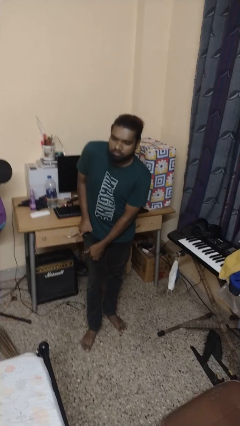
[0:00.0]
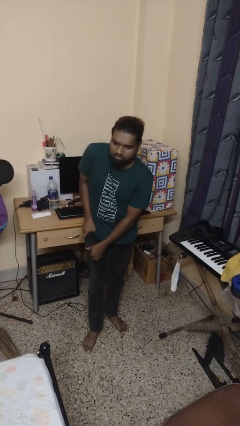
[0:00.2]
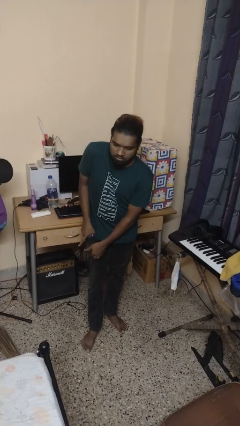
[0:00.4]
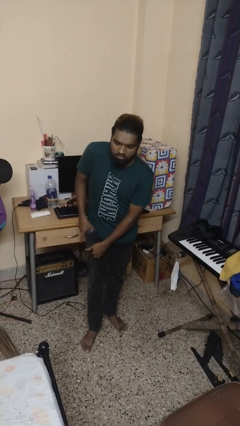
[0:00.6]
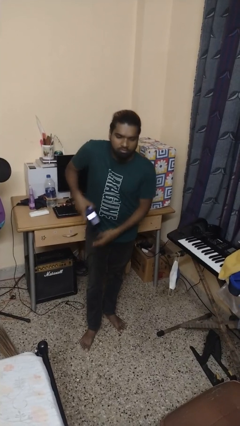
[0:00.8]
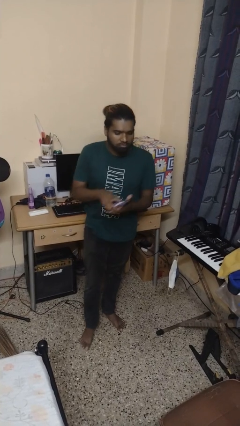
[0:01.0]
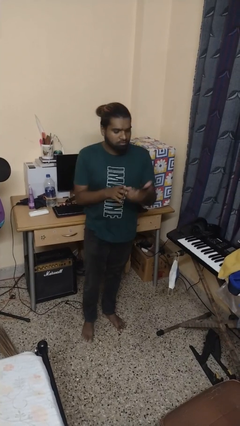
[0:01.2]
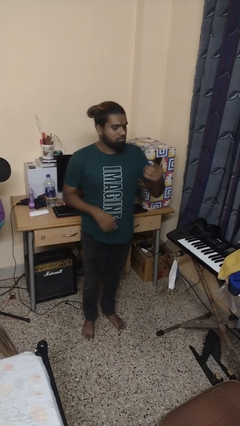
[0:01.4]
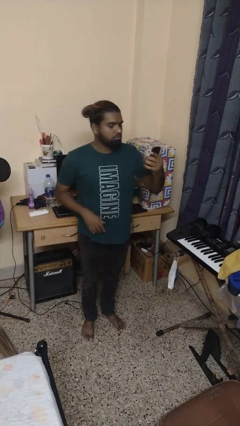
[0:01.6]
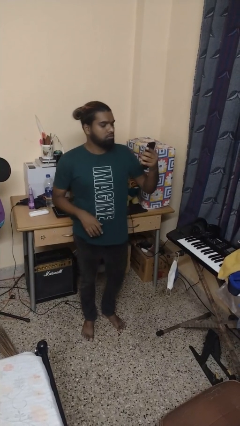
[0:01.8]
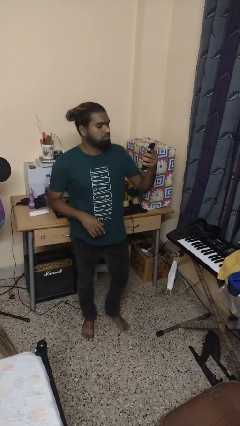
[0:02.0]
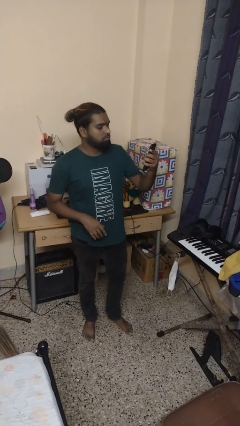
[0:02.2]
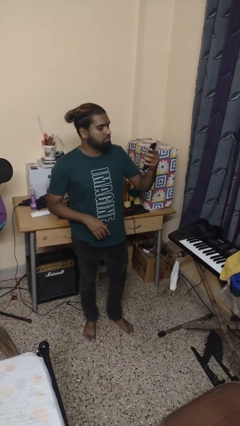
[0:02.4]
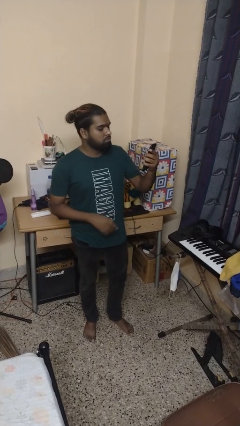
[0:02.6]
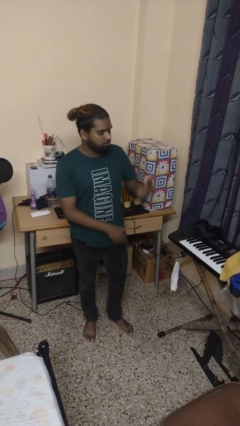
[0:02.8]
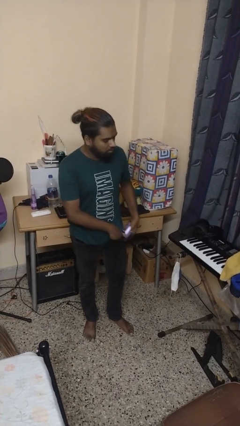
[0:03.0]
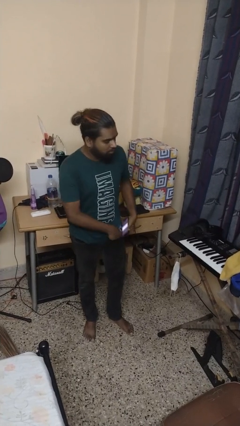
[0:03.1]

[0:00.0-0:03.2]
person takes phone from pocket

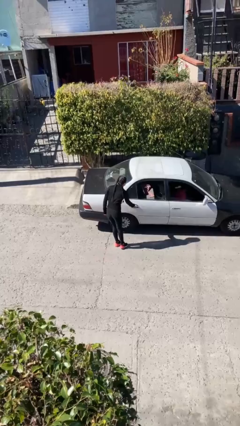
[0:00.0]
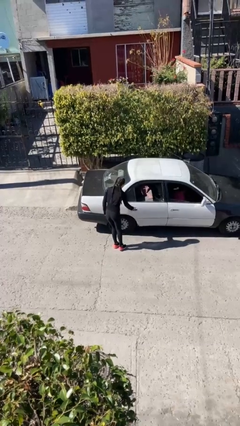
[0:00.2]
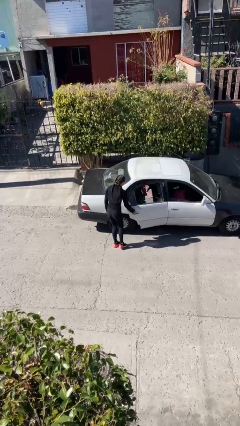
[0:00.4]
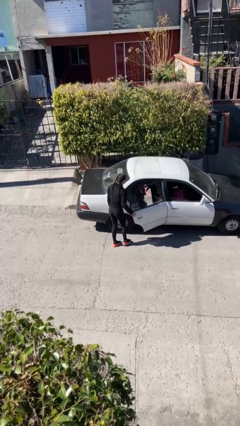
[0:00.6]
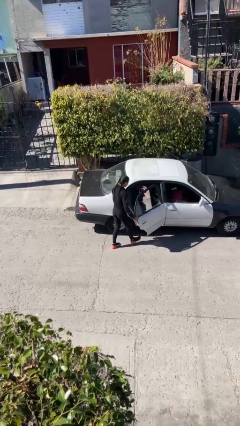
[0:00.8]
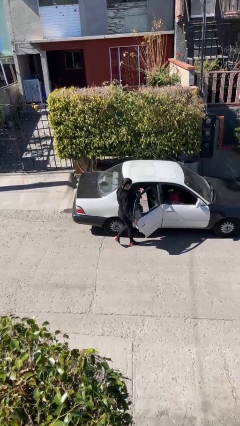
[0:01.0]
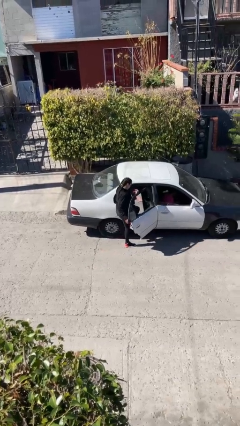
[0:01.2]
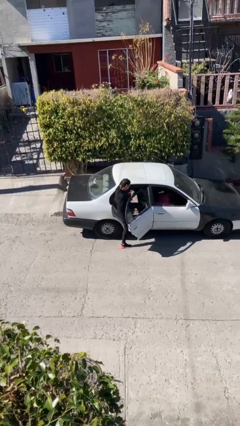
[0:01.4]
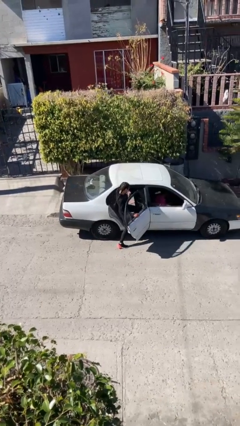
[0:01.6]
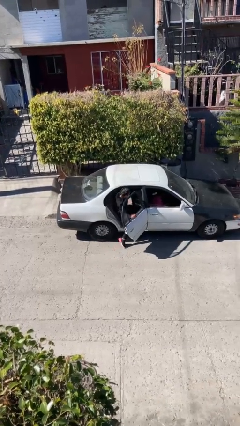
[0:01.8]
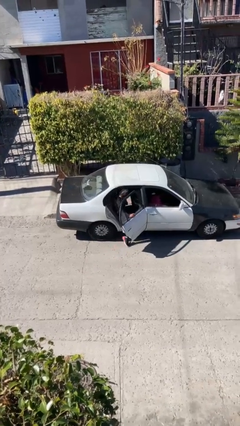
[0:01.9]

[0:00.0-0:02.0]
car picks up person

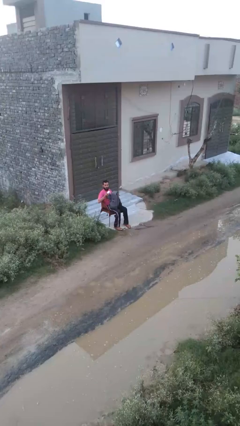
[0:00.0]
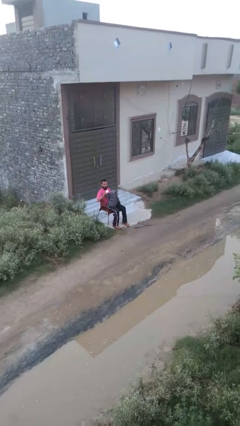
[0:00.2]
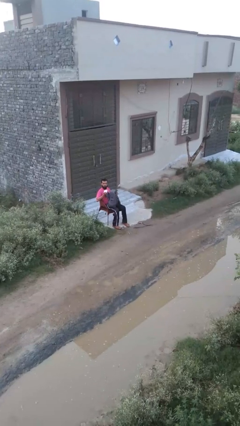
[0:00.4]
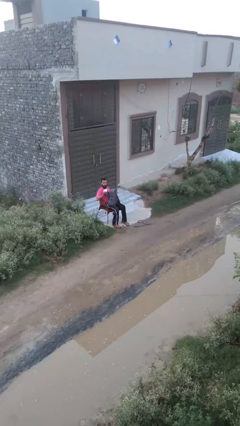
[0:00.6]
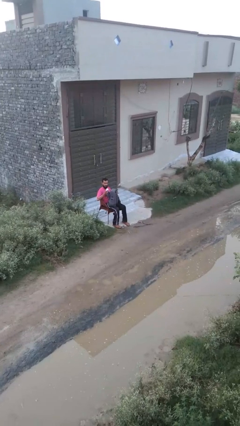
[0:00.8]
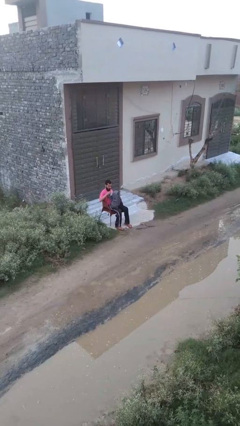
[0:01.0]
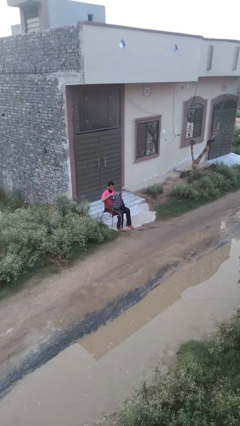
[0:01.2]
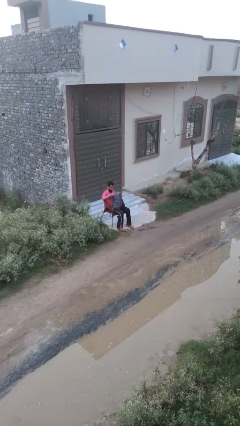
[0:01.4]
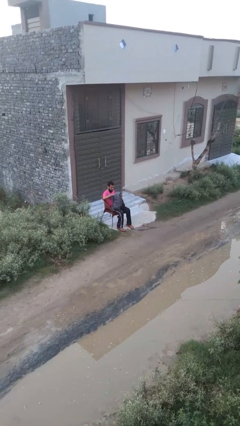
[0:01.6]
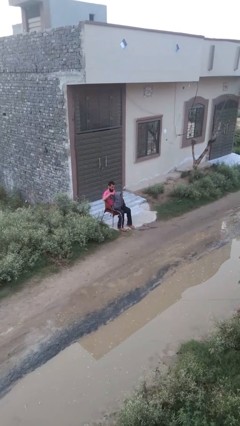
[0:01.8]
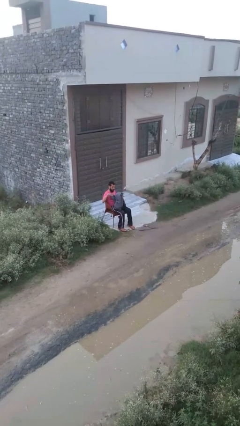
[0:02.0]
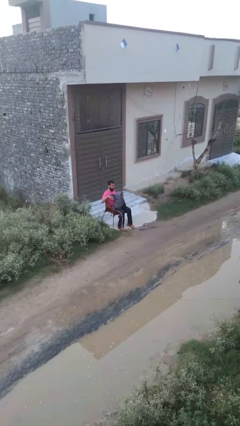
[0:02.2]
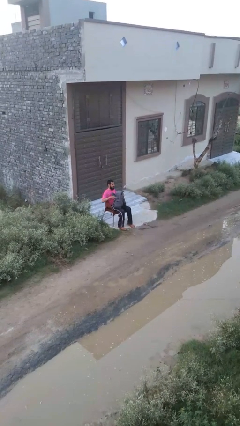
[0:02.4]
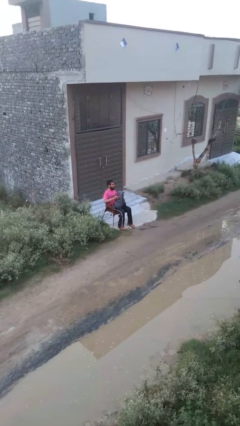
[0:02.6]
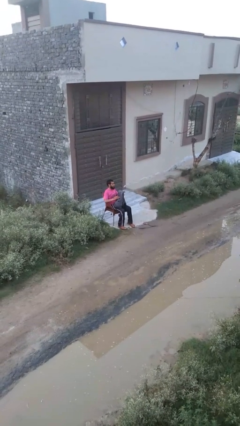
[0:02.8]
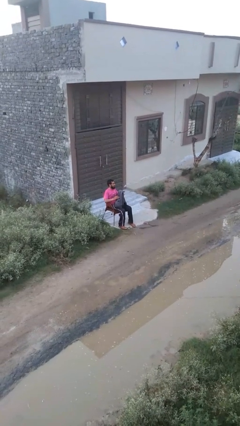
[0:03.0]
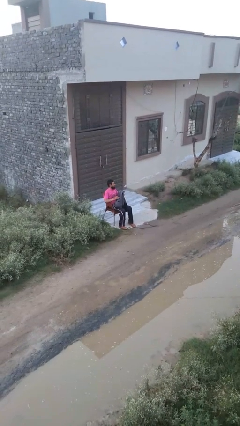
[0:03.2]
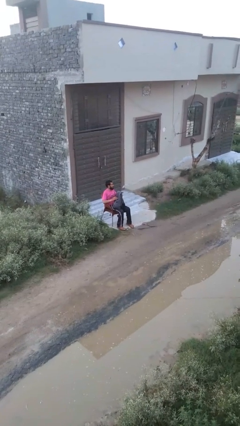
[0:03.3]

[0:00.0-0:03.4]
person puts object into backpack

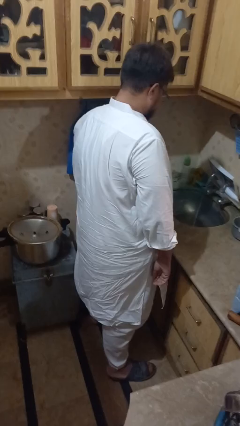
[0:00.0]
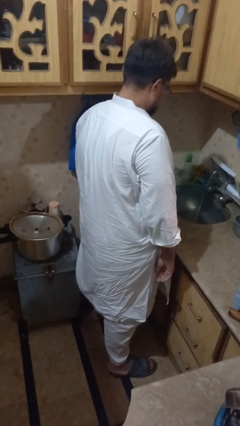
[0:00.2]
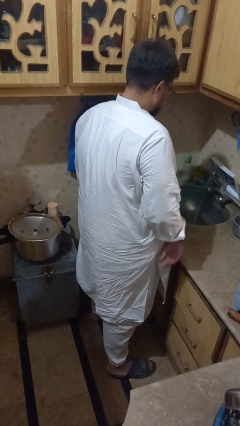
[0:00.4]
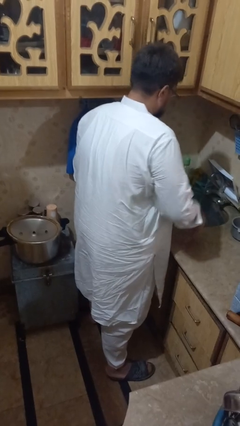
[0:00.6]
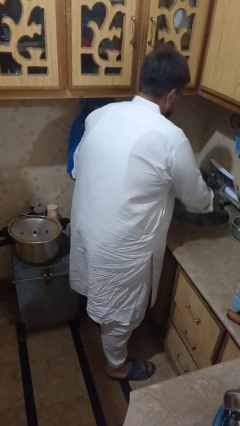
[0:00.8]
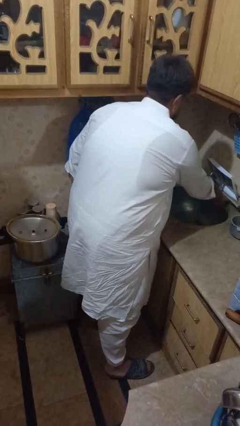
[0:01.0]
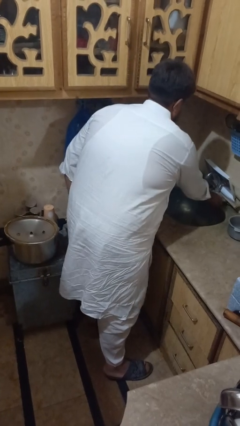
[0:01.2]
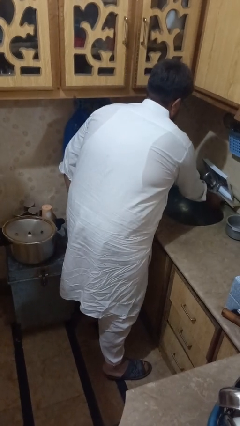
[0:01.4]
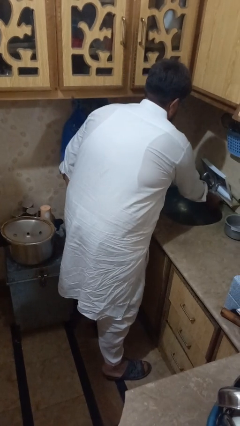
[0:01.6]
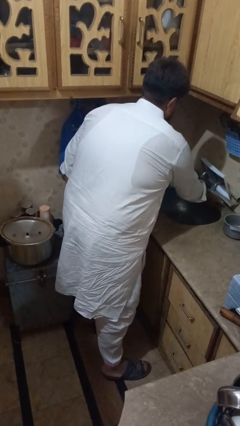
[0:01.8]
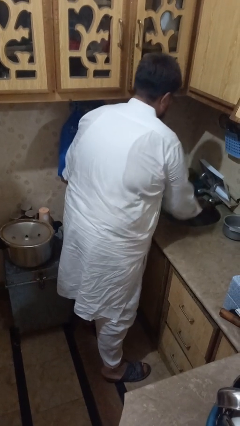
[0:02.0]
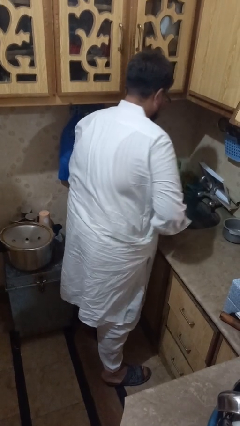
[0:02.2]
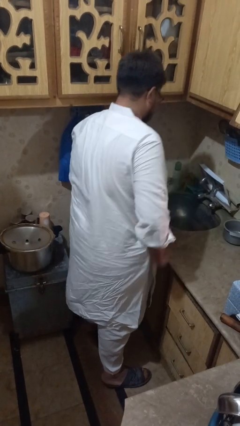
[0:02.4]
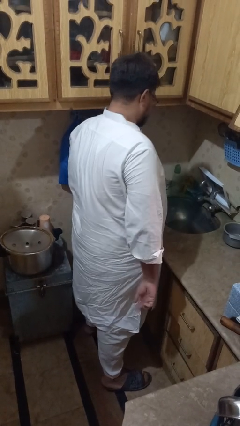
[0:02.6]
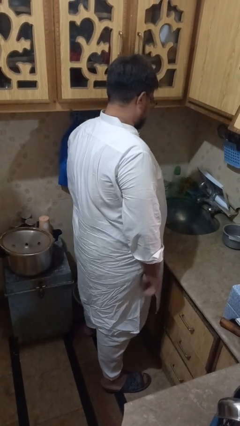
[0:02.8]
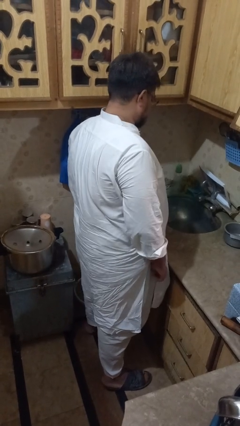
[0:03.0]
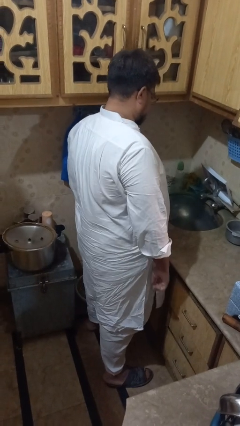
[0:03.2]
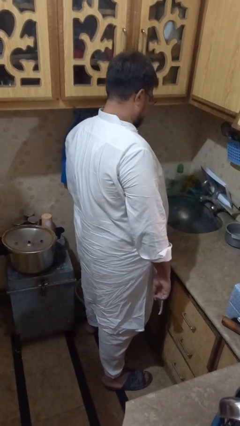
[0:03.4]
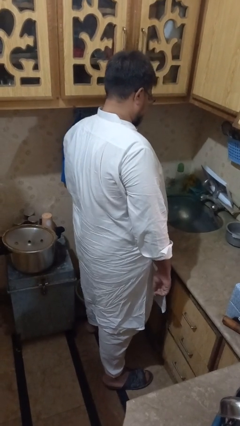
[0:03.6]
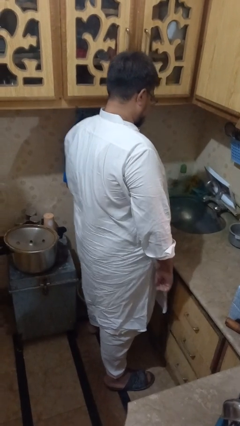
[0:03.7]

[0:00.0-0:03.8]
person turns off faucet

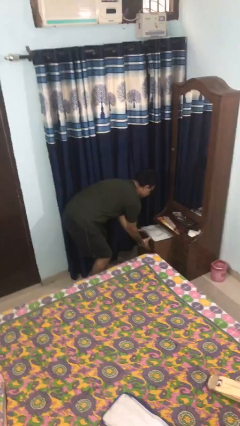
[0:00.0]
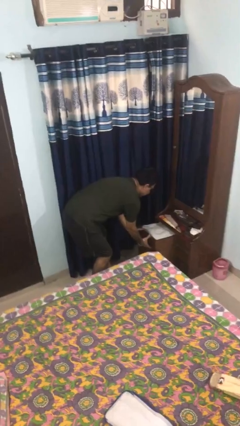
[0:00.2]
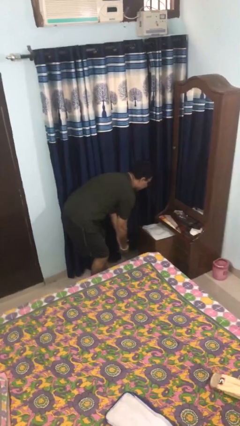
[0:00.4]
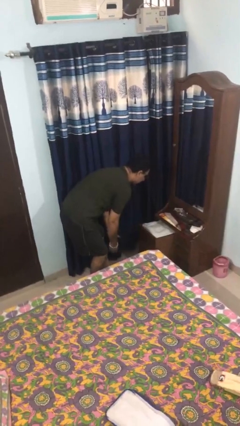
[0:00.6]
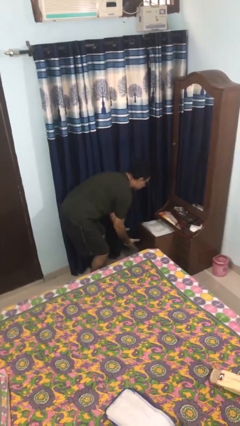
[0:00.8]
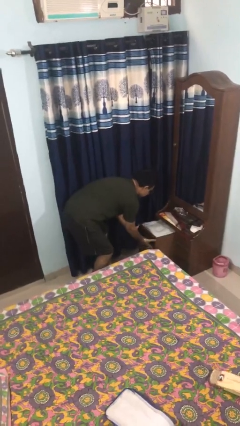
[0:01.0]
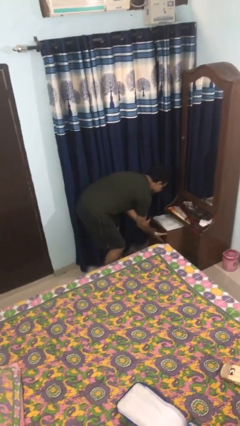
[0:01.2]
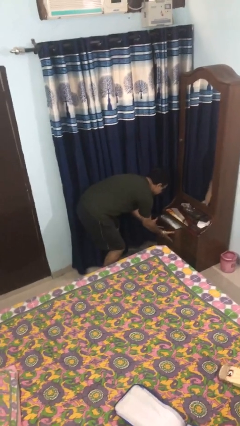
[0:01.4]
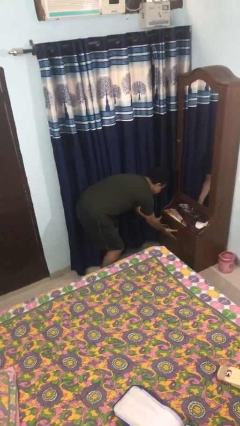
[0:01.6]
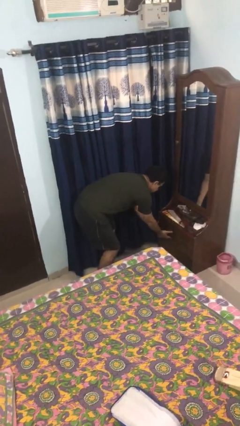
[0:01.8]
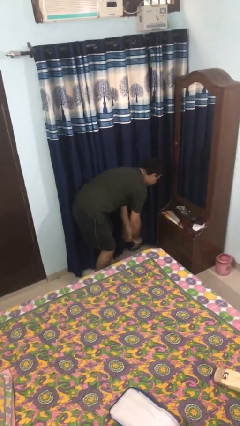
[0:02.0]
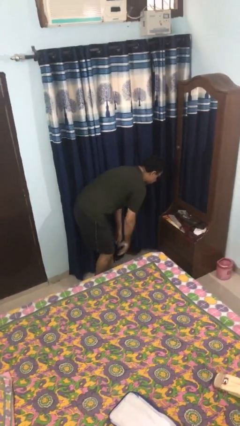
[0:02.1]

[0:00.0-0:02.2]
person closes dresser drawer

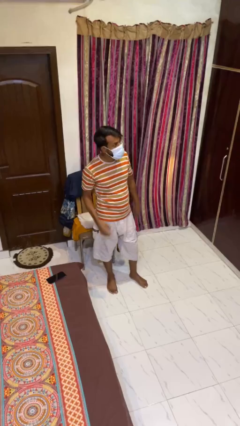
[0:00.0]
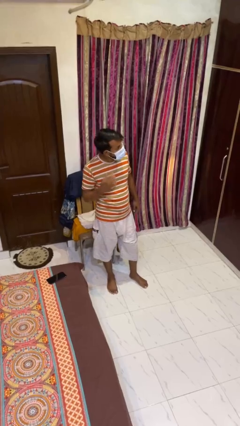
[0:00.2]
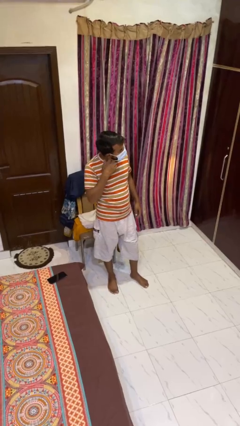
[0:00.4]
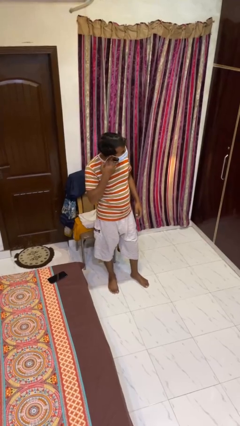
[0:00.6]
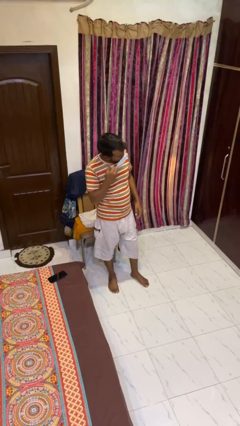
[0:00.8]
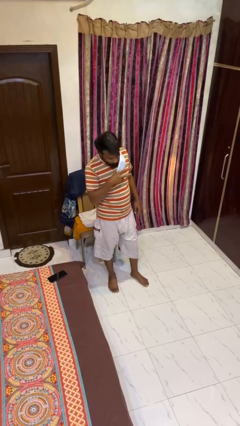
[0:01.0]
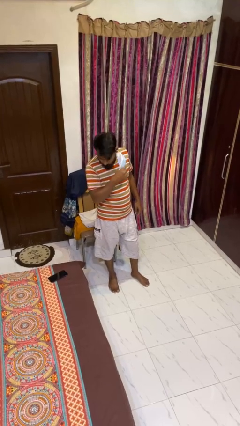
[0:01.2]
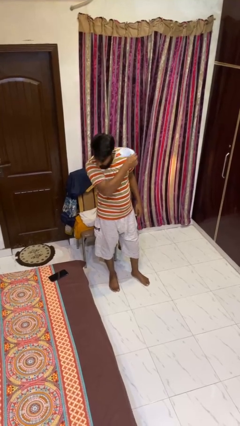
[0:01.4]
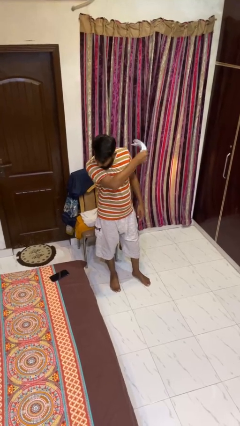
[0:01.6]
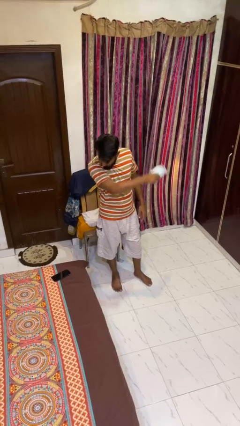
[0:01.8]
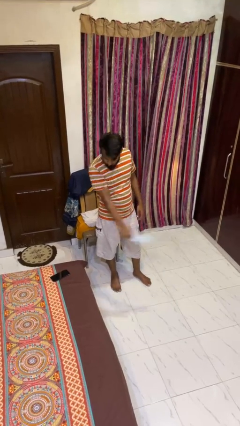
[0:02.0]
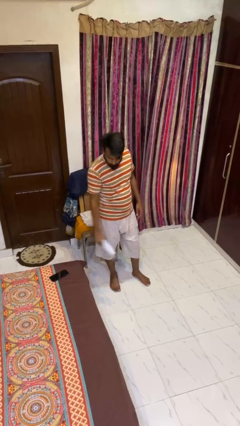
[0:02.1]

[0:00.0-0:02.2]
person takes off facemask

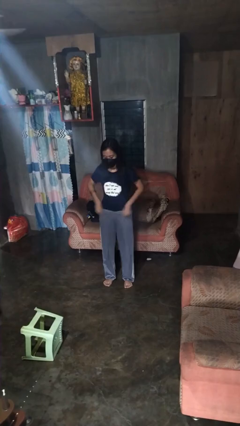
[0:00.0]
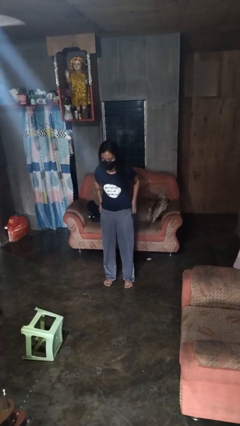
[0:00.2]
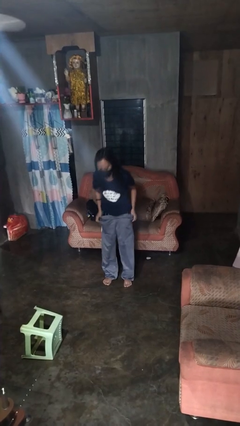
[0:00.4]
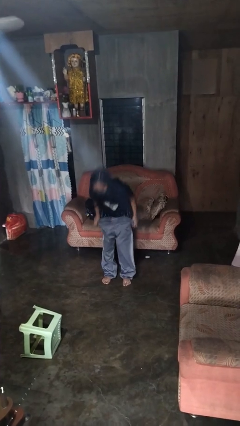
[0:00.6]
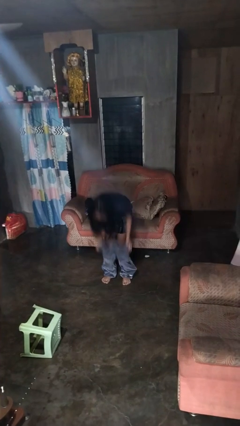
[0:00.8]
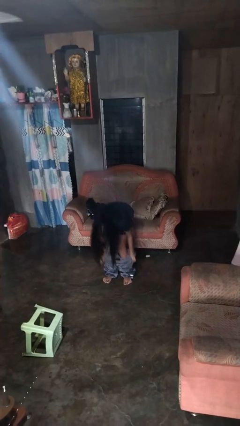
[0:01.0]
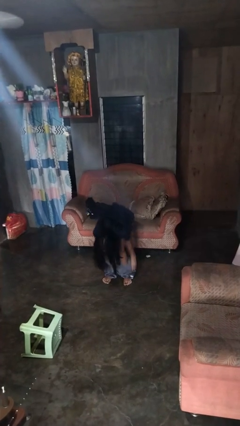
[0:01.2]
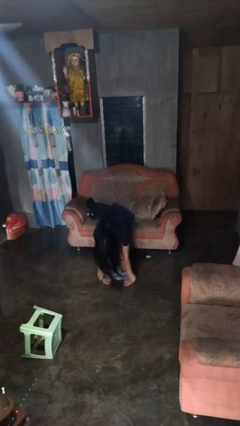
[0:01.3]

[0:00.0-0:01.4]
person takes off pants
